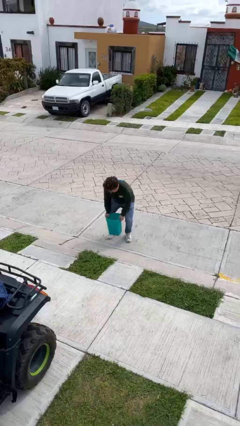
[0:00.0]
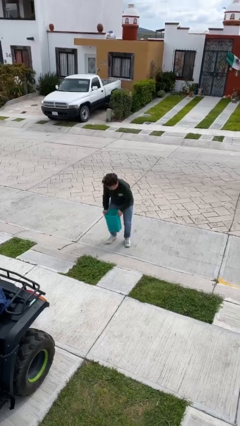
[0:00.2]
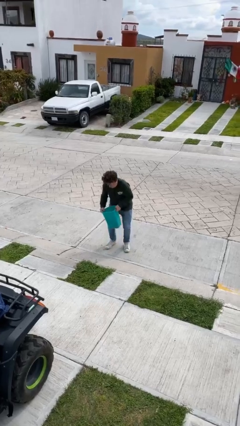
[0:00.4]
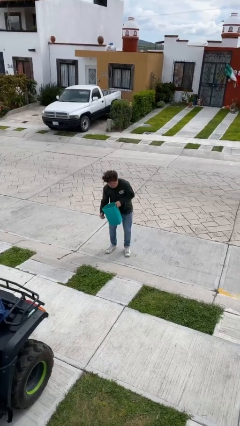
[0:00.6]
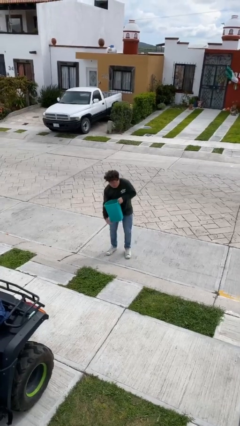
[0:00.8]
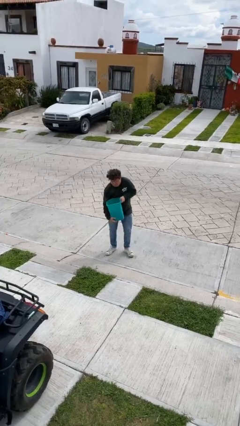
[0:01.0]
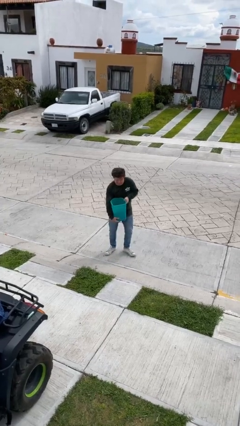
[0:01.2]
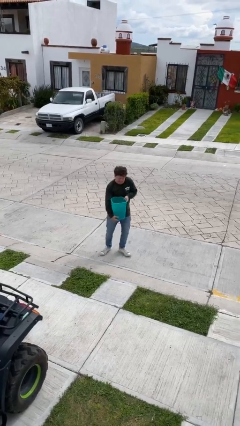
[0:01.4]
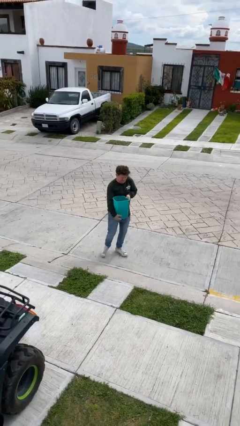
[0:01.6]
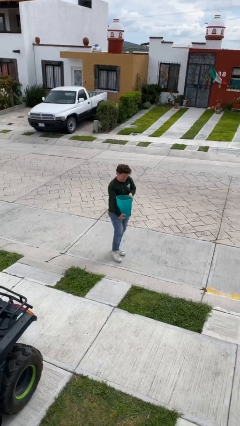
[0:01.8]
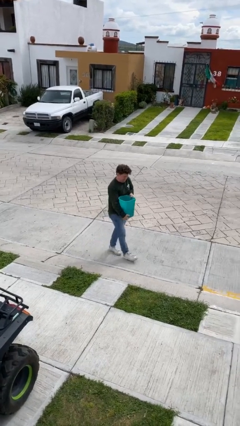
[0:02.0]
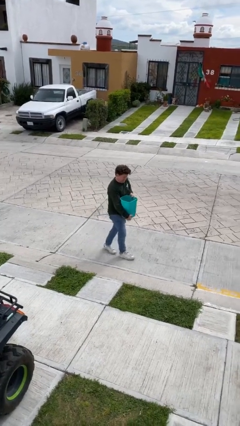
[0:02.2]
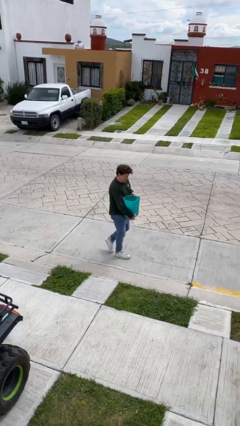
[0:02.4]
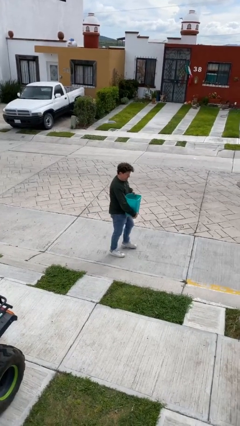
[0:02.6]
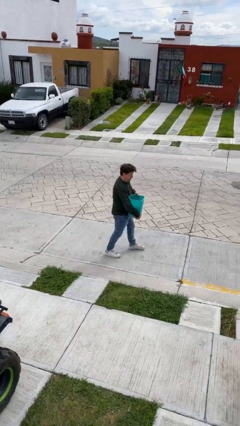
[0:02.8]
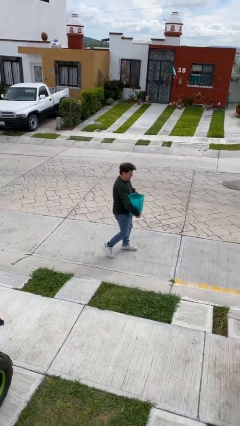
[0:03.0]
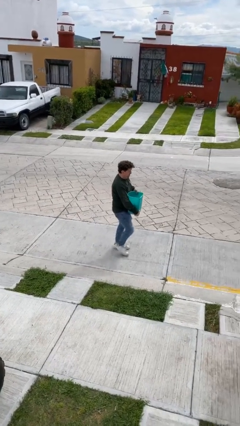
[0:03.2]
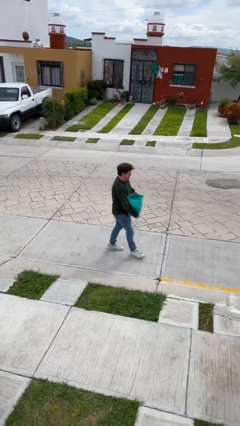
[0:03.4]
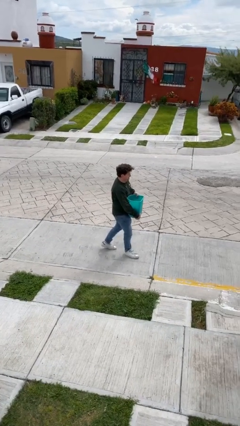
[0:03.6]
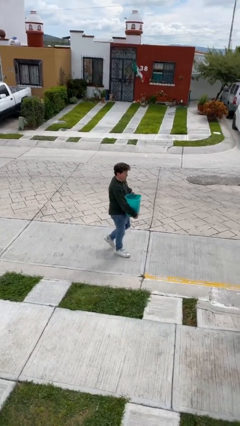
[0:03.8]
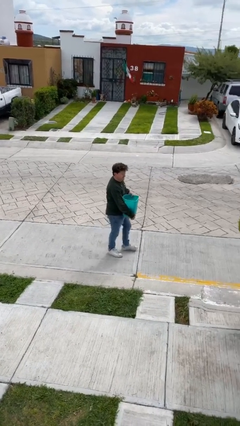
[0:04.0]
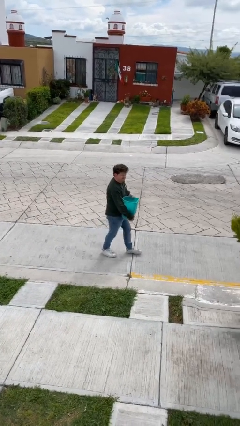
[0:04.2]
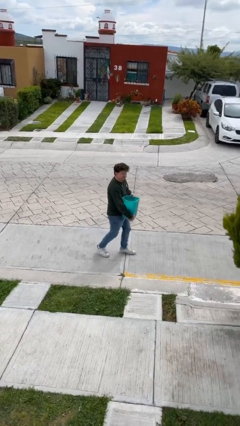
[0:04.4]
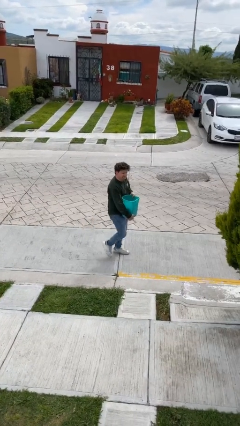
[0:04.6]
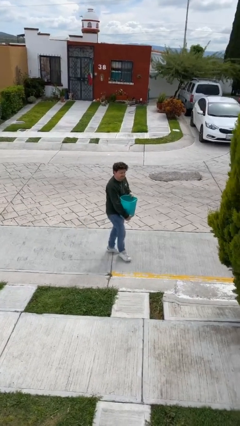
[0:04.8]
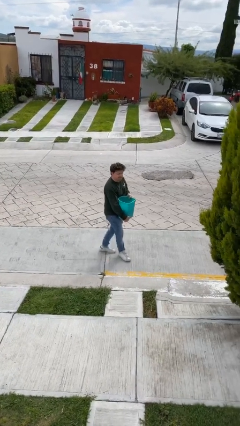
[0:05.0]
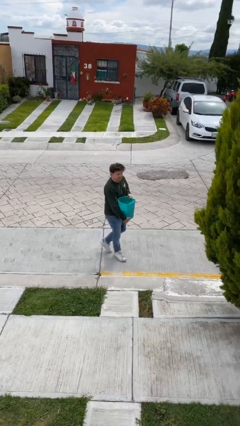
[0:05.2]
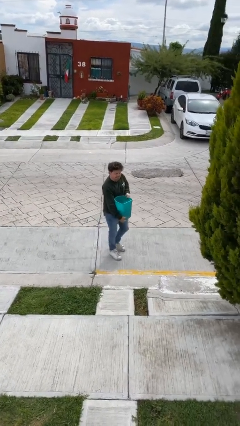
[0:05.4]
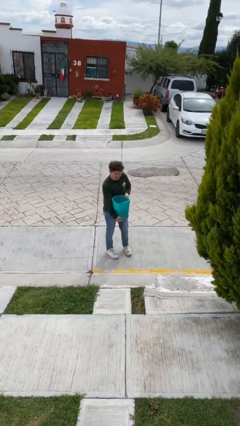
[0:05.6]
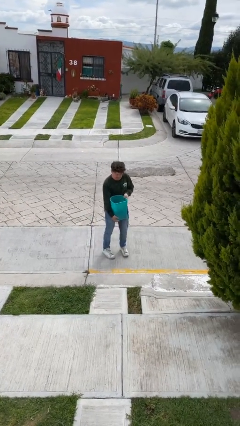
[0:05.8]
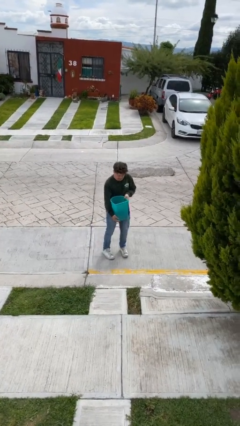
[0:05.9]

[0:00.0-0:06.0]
person carries heavy object

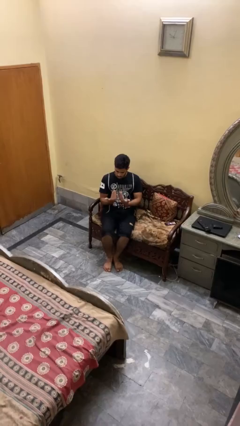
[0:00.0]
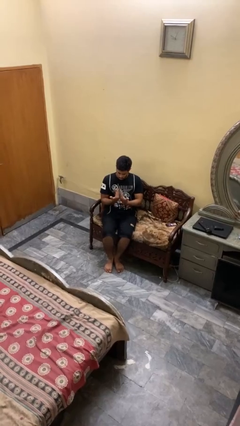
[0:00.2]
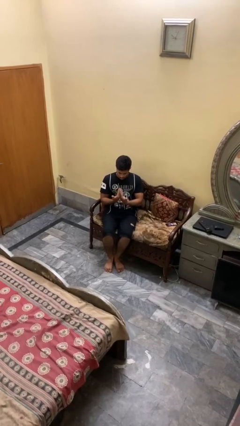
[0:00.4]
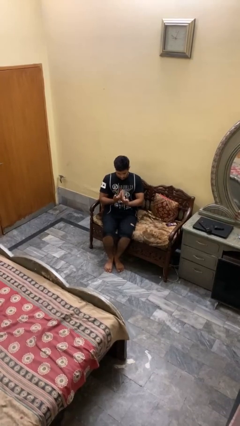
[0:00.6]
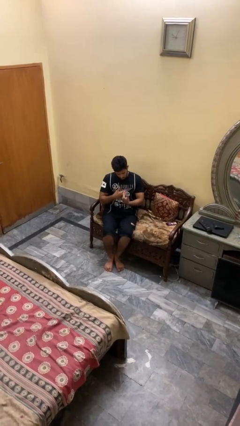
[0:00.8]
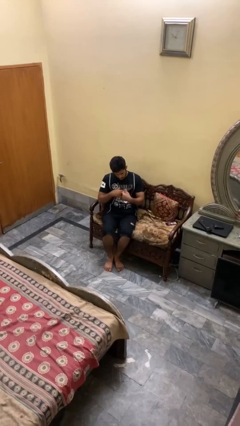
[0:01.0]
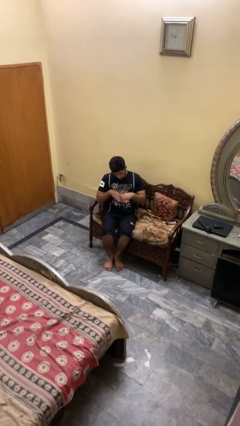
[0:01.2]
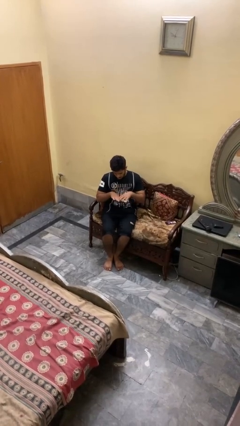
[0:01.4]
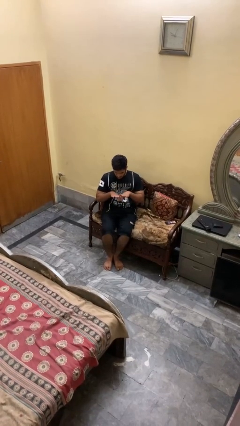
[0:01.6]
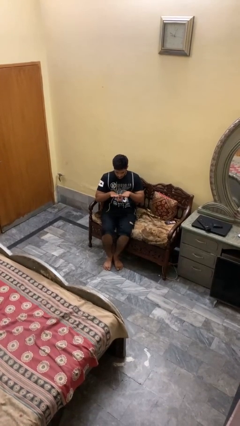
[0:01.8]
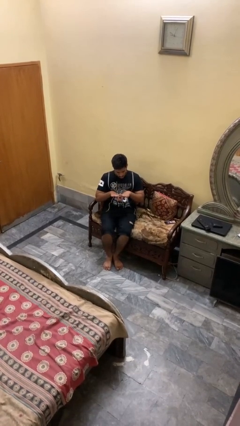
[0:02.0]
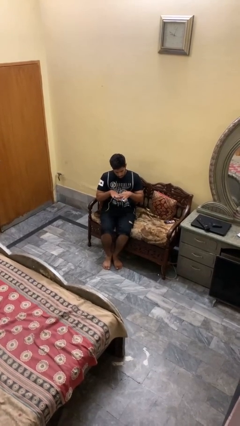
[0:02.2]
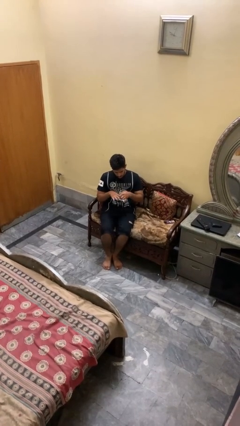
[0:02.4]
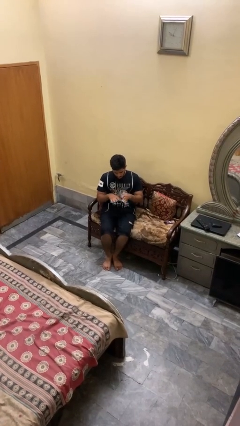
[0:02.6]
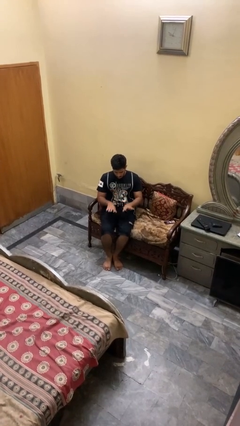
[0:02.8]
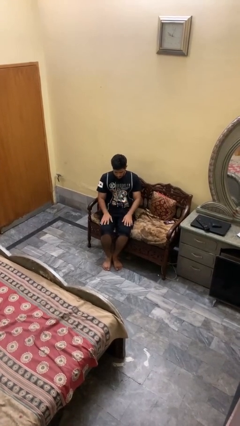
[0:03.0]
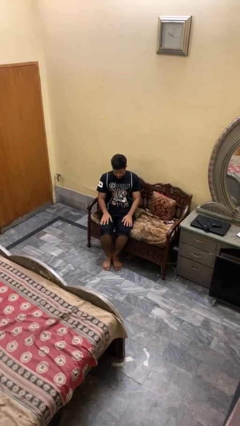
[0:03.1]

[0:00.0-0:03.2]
person looks at hands in lap

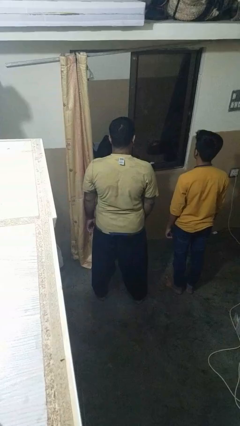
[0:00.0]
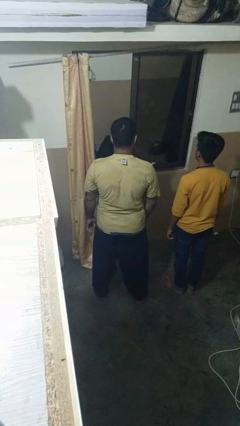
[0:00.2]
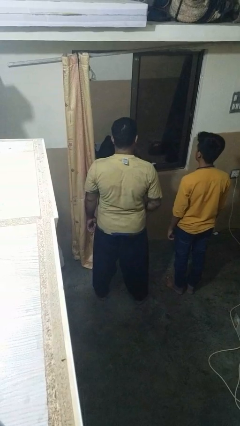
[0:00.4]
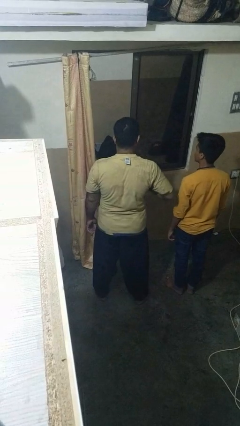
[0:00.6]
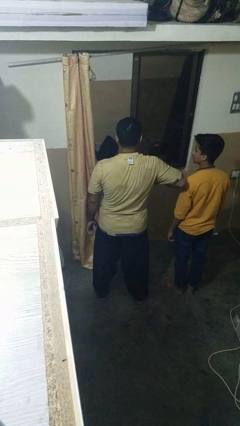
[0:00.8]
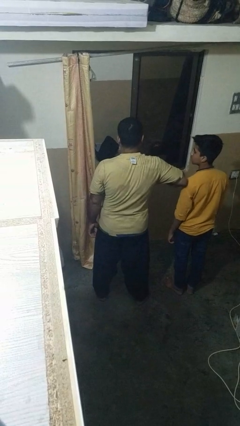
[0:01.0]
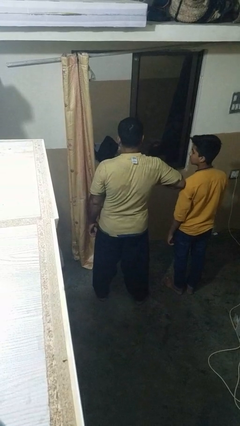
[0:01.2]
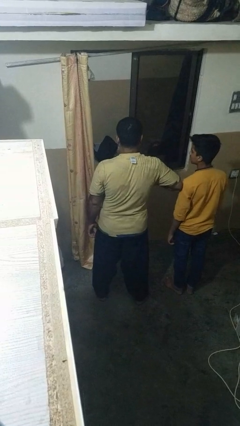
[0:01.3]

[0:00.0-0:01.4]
person nudges person with elbow

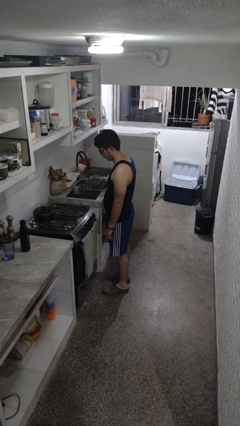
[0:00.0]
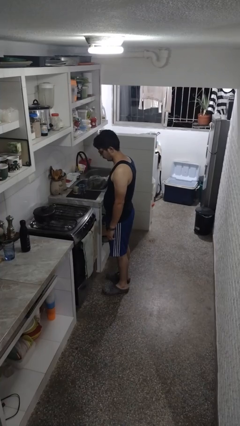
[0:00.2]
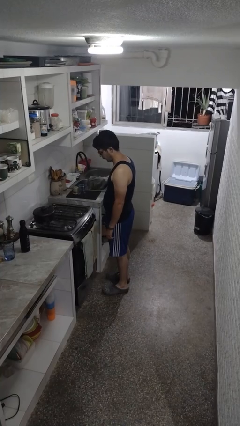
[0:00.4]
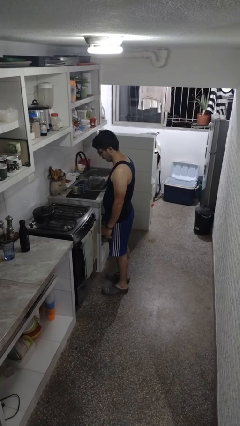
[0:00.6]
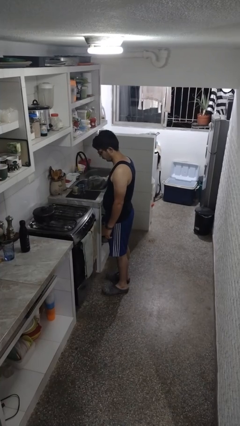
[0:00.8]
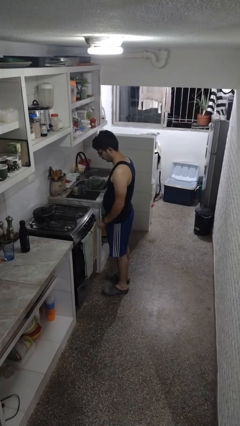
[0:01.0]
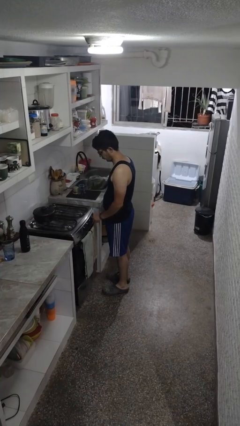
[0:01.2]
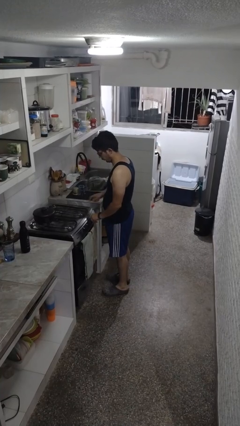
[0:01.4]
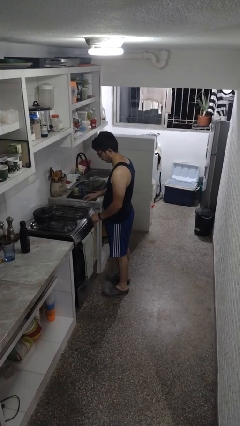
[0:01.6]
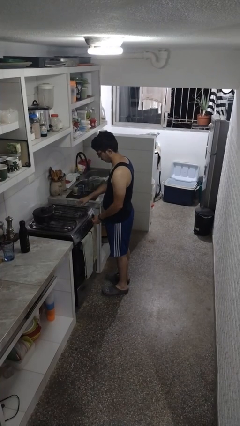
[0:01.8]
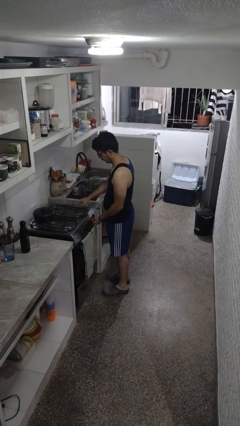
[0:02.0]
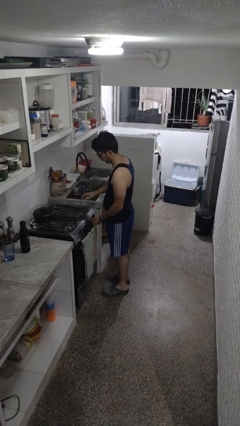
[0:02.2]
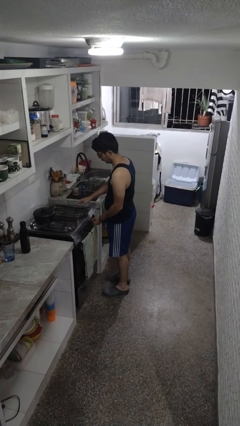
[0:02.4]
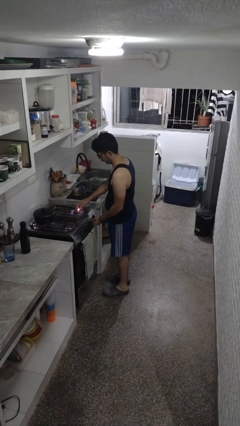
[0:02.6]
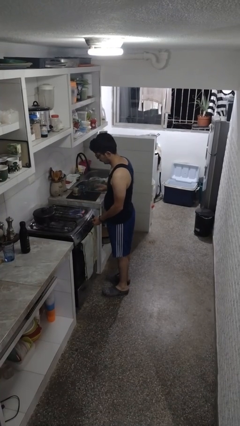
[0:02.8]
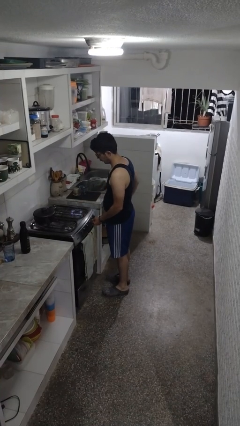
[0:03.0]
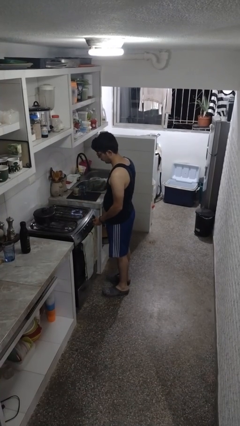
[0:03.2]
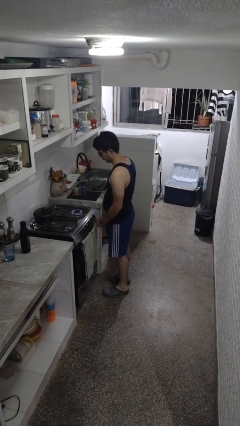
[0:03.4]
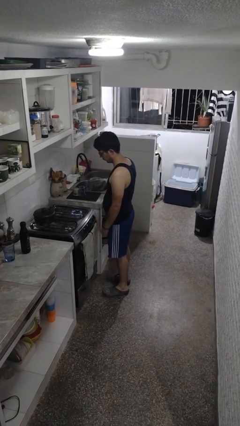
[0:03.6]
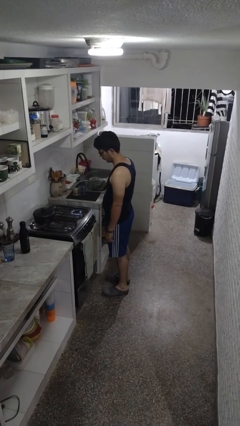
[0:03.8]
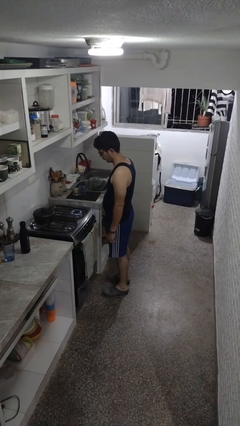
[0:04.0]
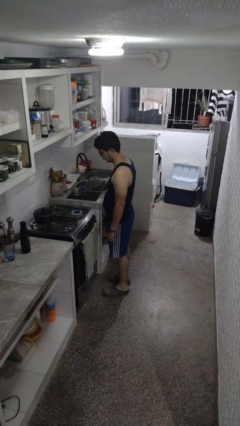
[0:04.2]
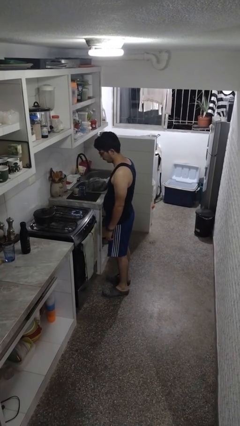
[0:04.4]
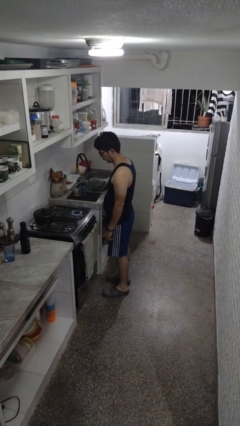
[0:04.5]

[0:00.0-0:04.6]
person turns on stovetop

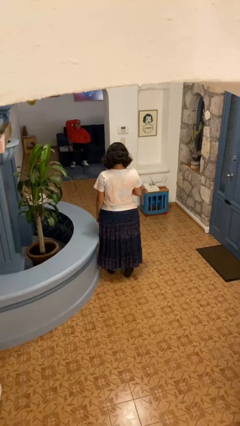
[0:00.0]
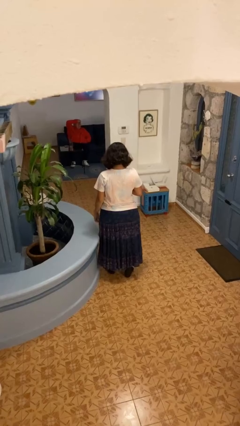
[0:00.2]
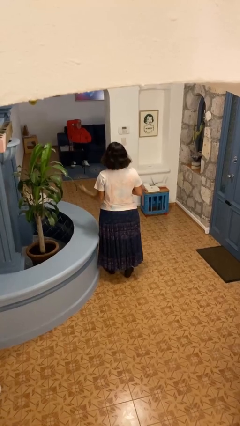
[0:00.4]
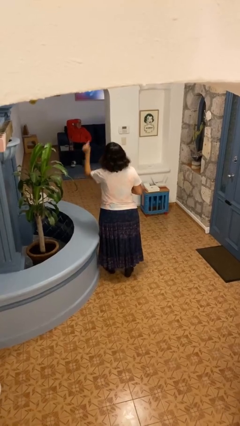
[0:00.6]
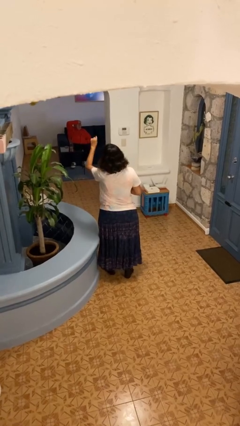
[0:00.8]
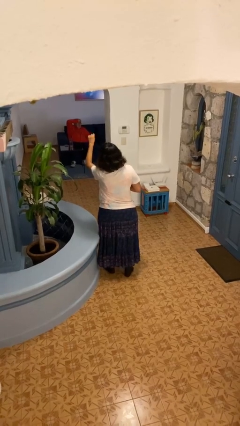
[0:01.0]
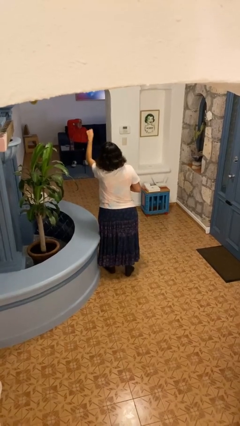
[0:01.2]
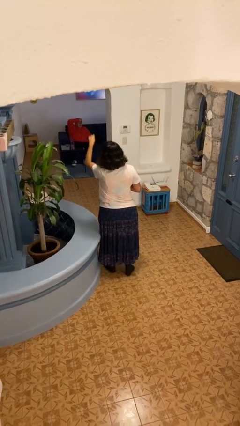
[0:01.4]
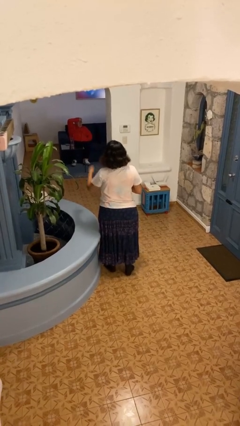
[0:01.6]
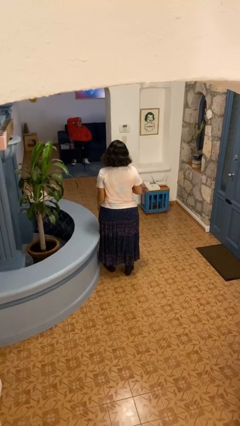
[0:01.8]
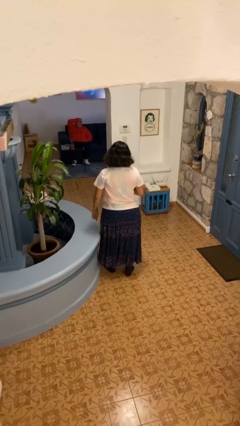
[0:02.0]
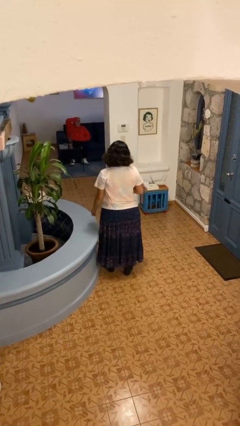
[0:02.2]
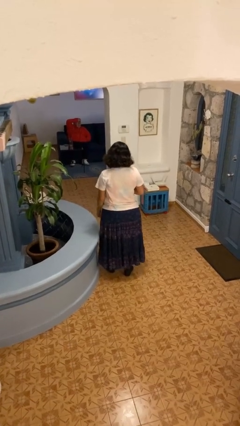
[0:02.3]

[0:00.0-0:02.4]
person points at person

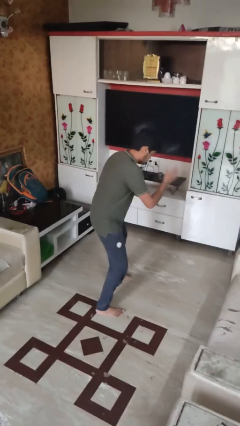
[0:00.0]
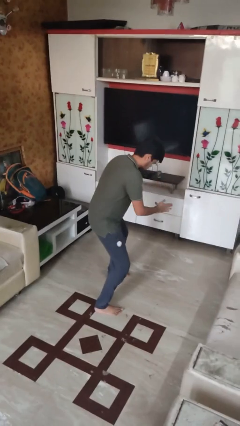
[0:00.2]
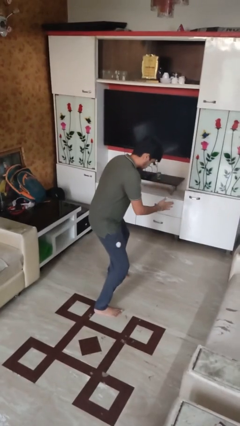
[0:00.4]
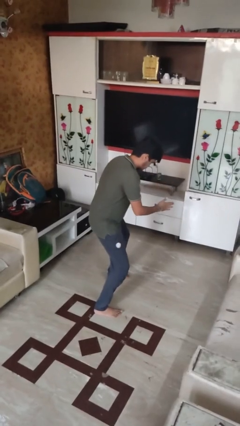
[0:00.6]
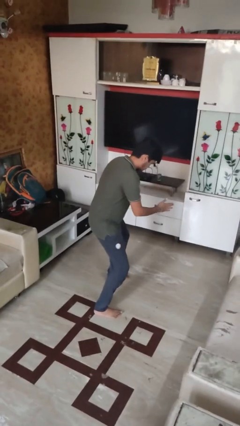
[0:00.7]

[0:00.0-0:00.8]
person karate chop
